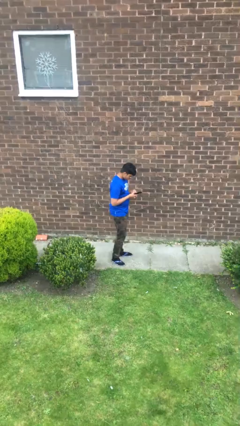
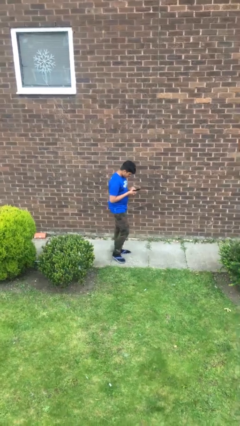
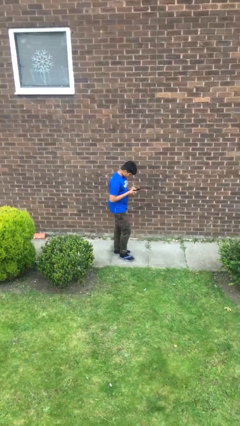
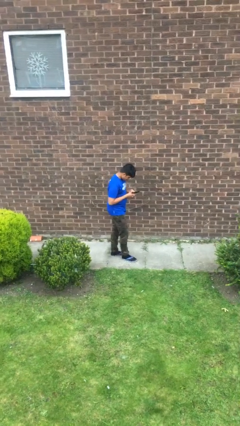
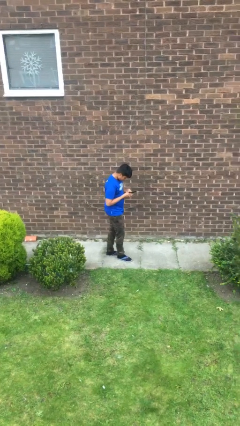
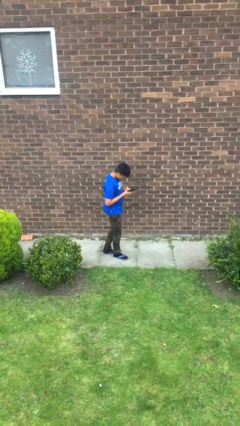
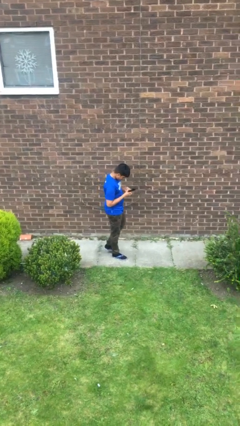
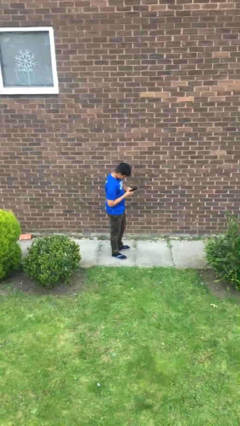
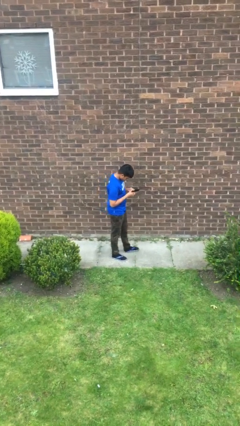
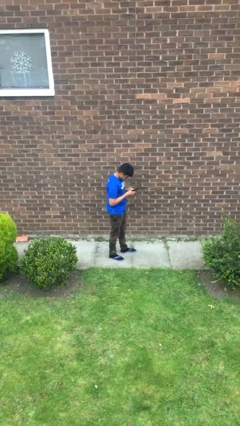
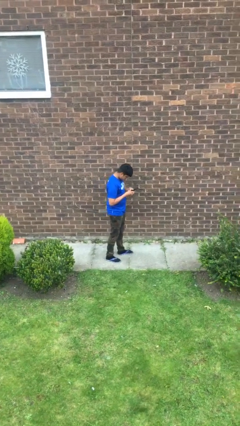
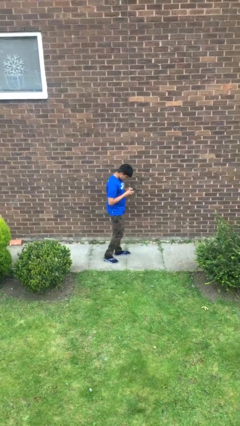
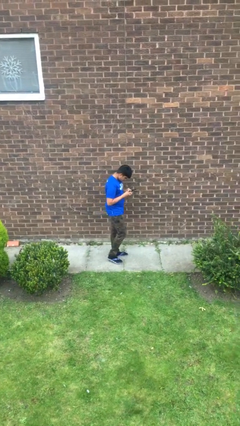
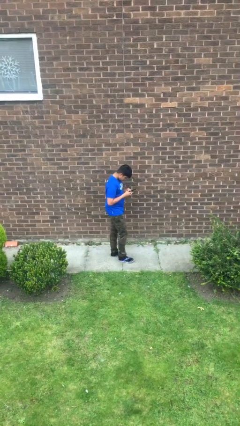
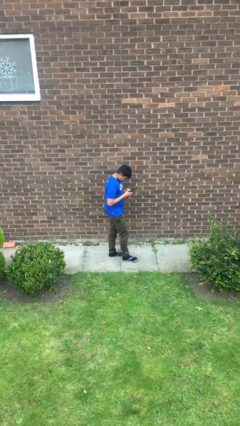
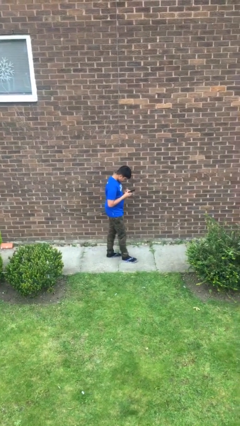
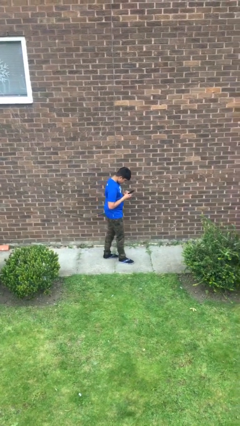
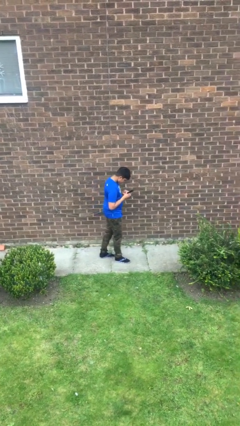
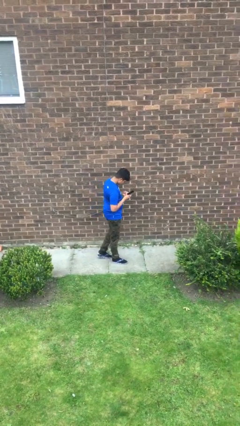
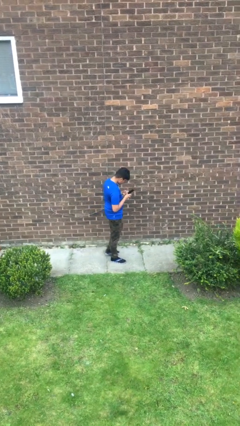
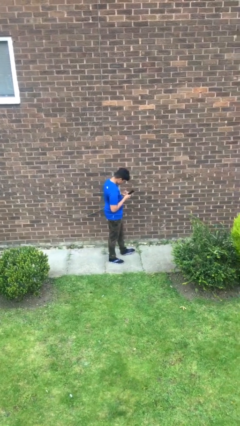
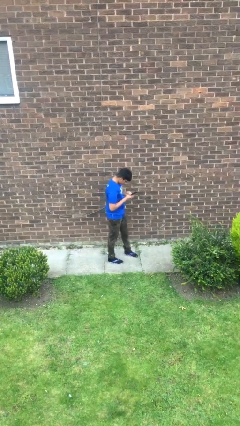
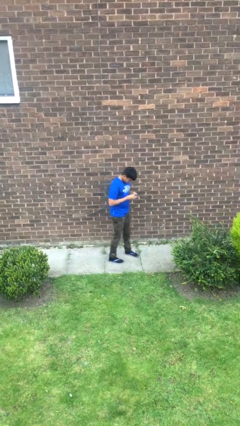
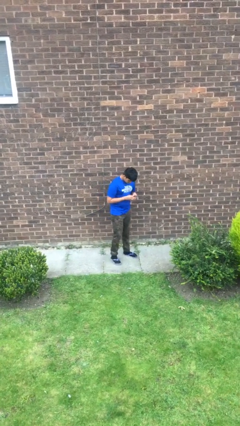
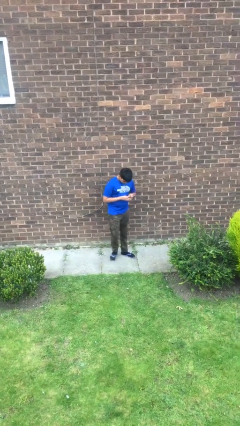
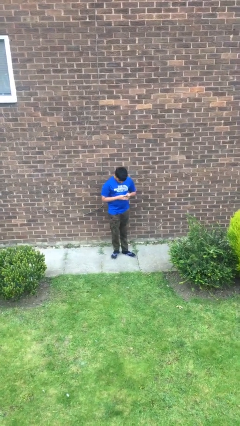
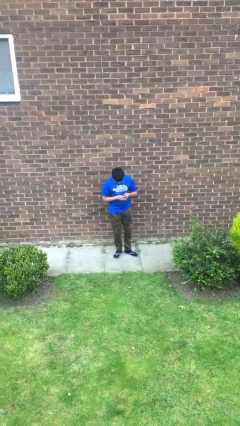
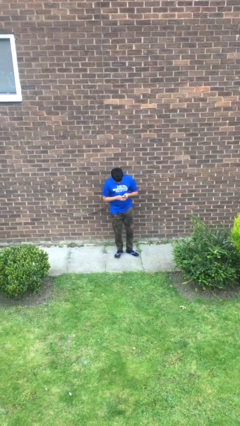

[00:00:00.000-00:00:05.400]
person texts on phone

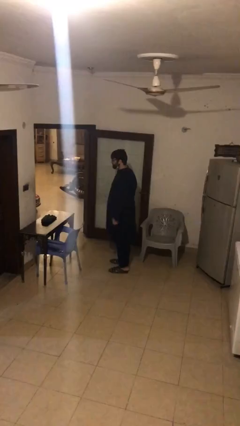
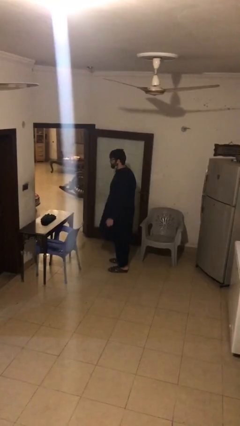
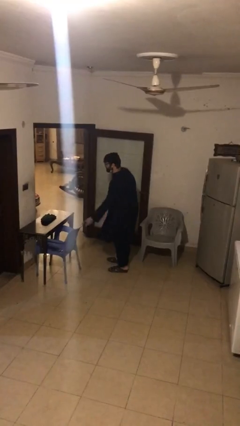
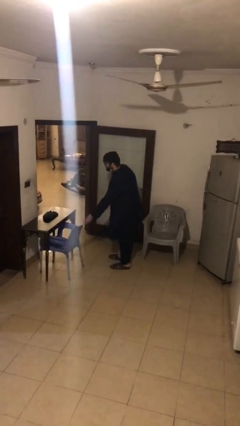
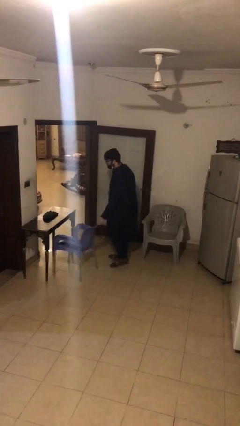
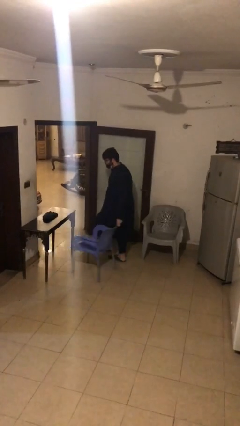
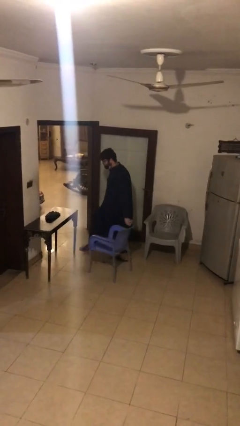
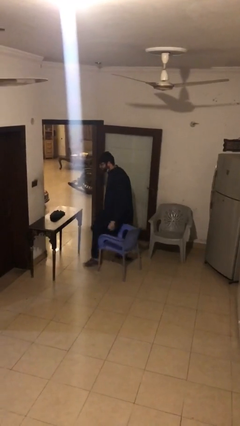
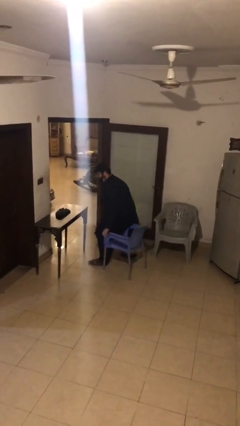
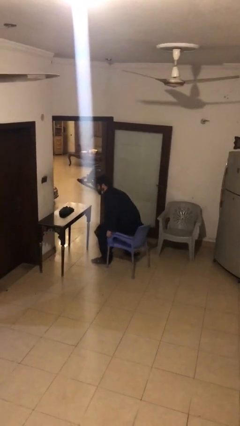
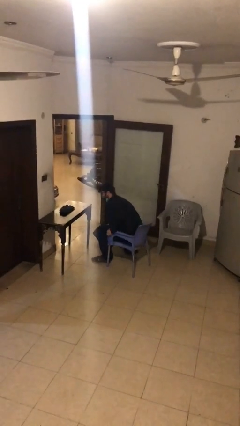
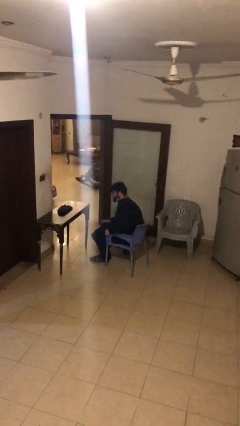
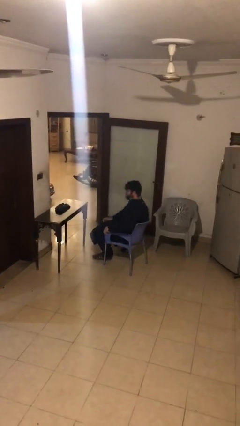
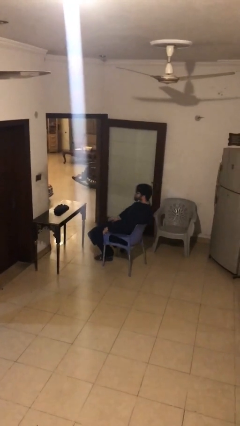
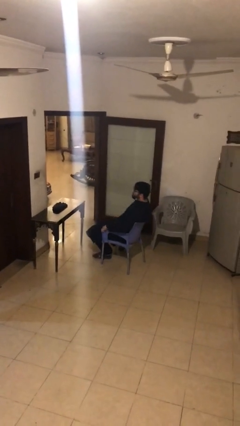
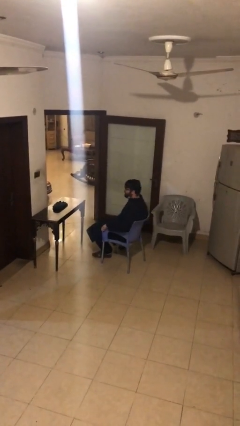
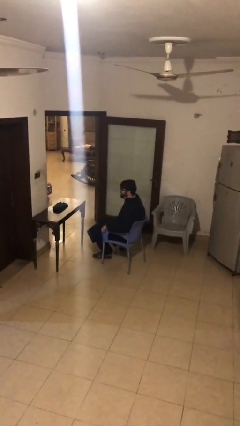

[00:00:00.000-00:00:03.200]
person sits down

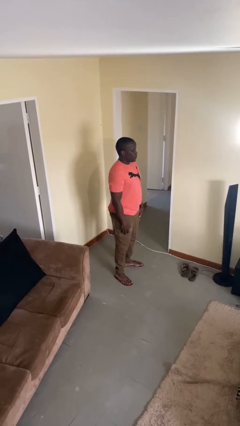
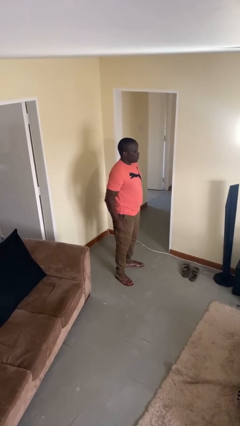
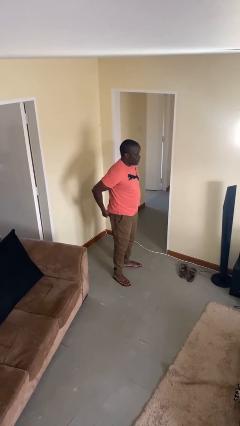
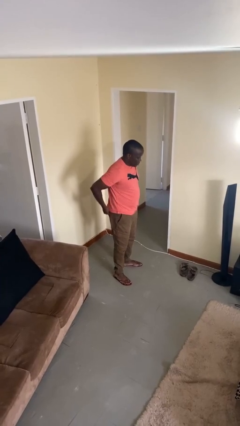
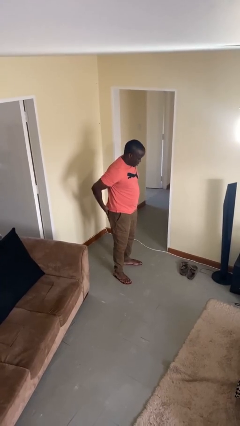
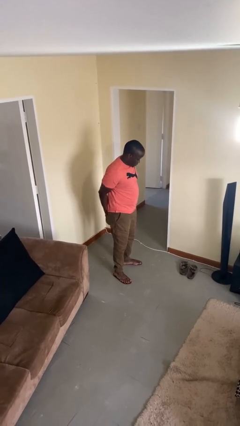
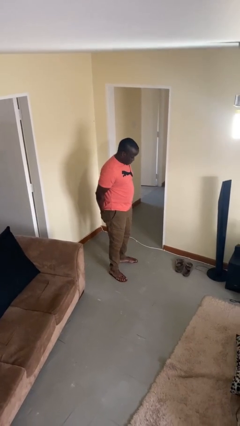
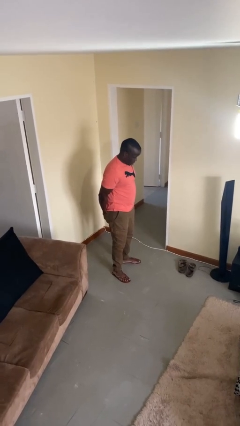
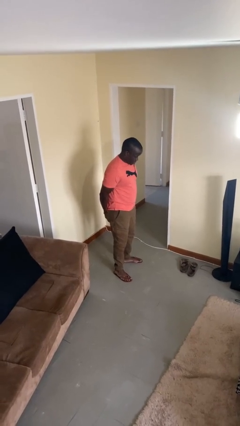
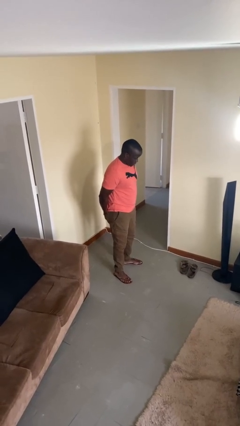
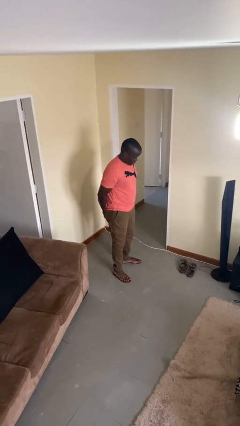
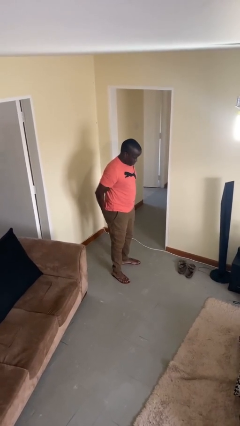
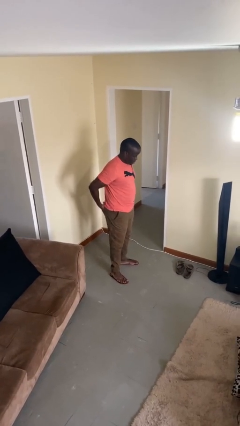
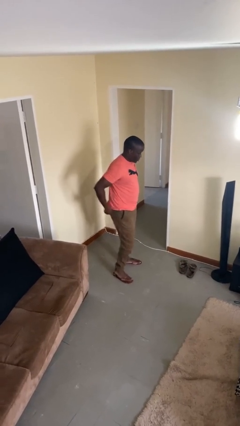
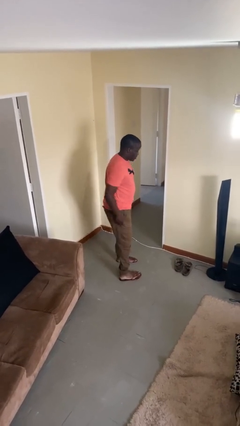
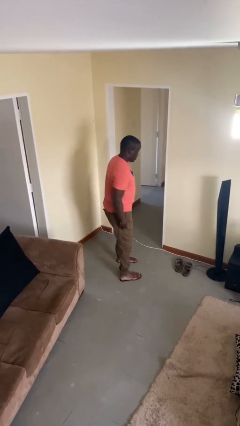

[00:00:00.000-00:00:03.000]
person puts hands in back pockets

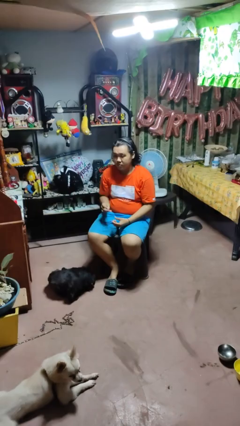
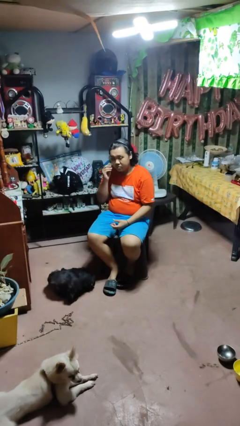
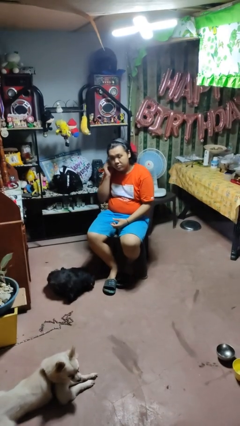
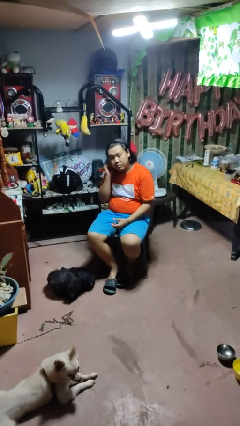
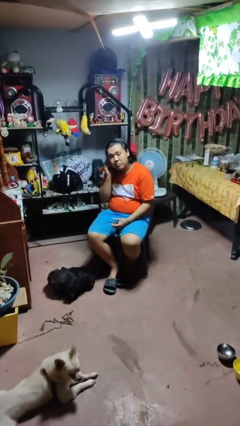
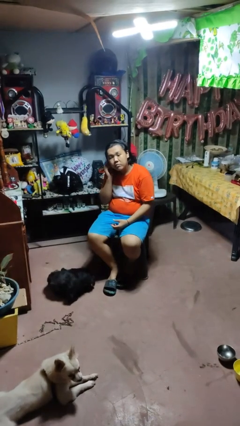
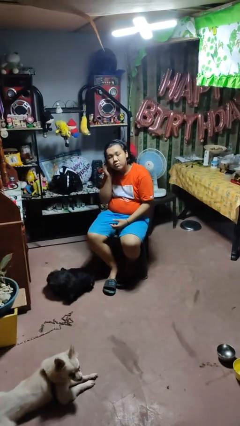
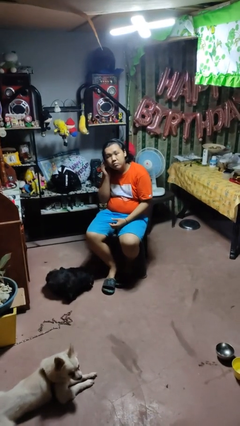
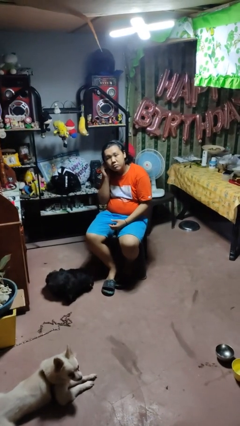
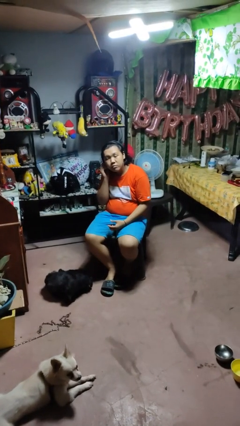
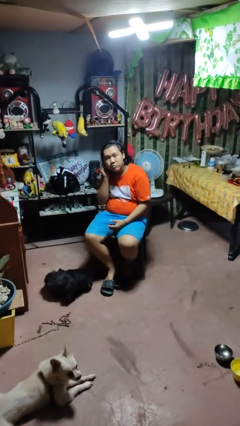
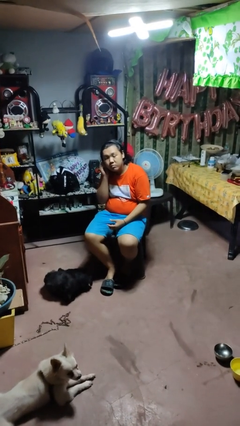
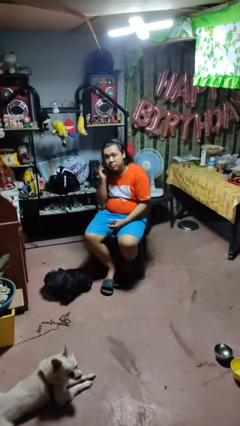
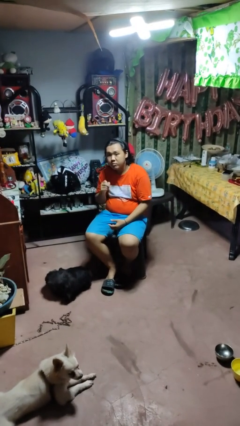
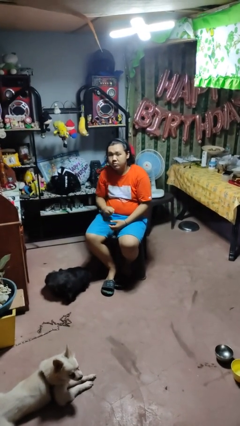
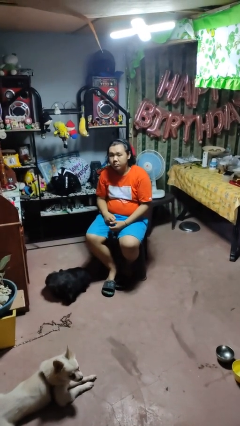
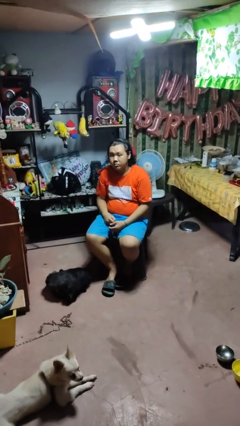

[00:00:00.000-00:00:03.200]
person puts on earrings

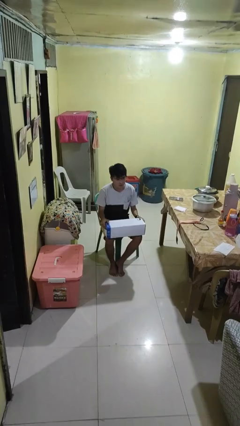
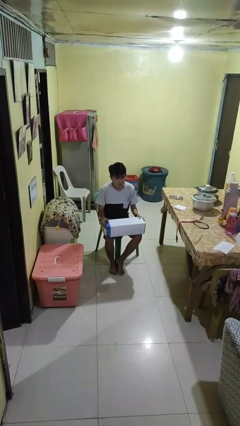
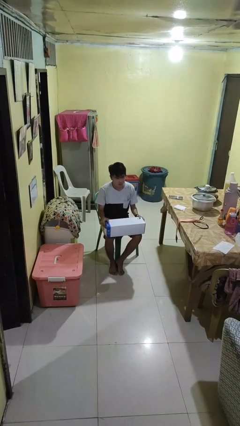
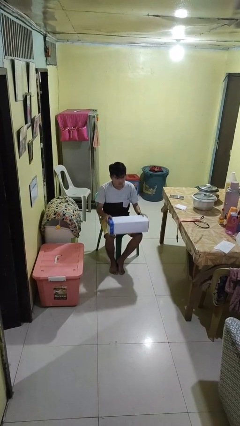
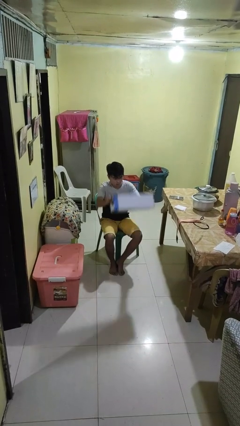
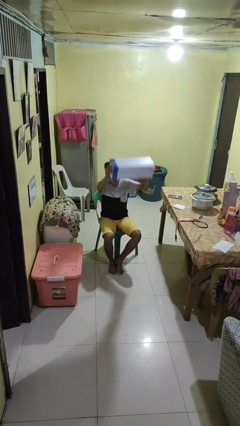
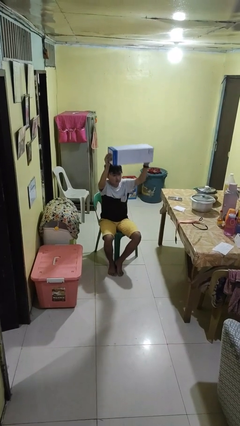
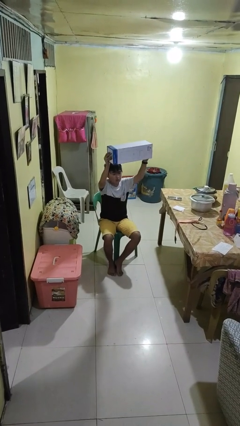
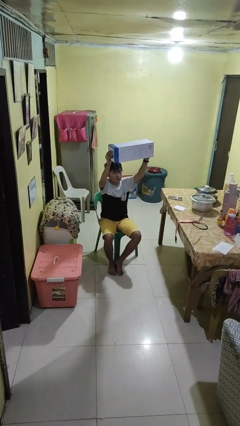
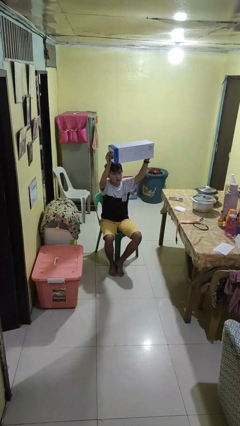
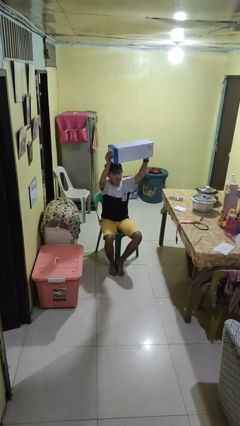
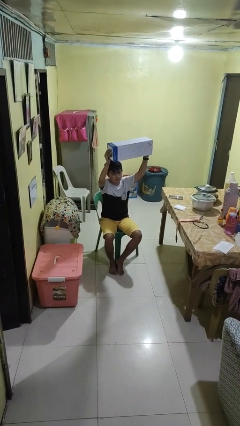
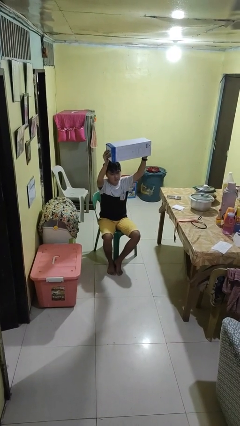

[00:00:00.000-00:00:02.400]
person holds object above head

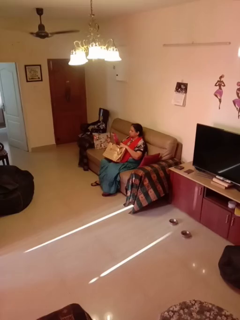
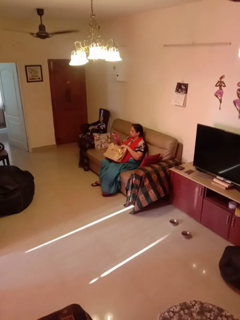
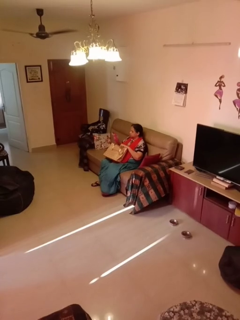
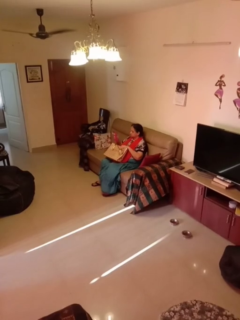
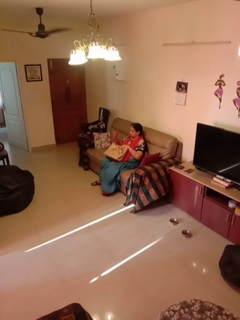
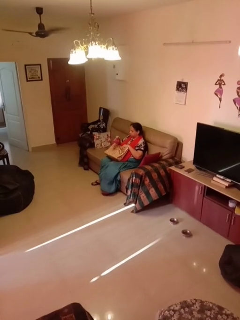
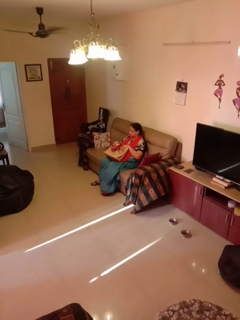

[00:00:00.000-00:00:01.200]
person takes object from purse
